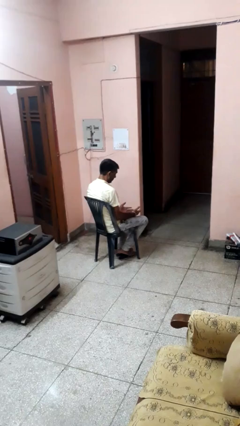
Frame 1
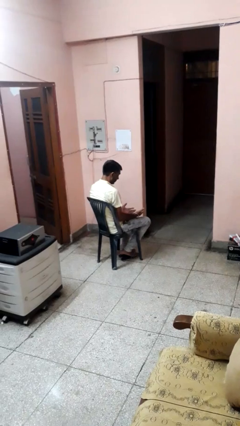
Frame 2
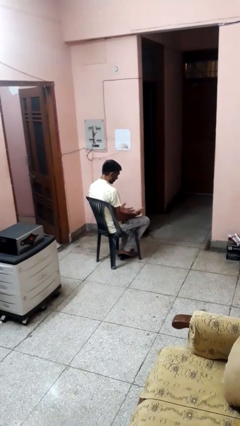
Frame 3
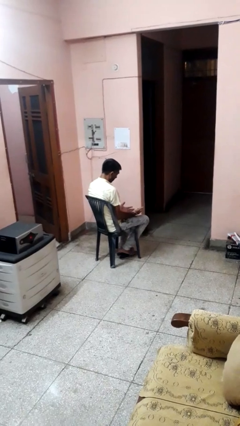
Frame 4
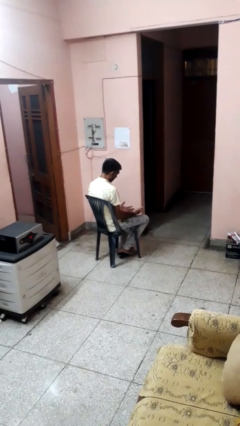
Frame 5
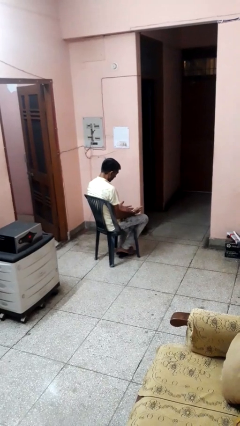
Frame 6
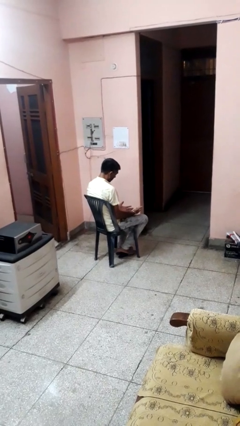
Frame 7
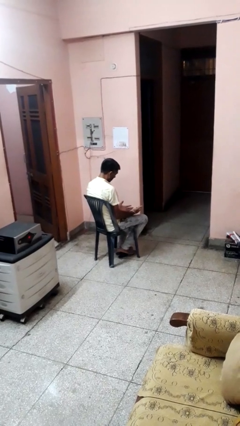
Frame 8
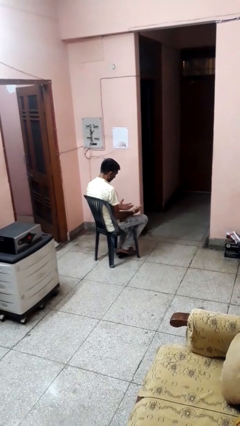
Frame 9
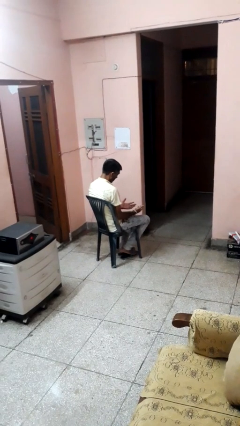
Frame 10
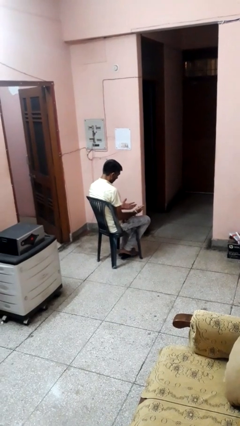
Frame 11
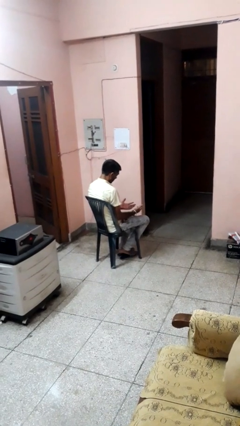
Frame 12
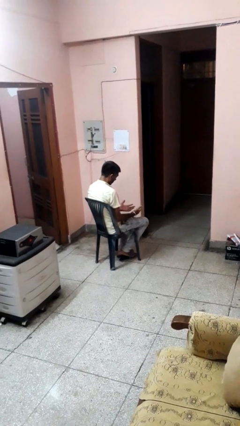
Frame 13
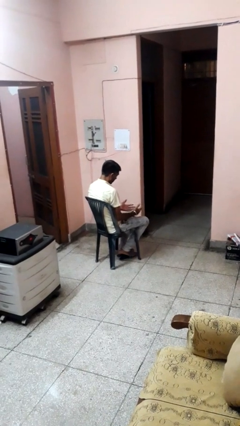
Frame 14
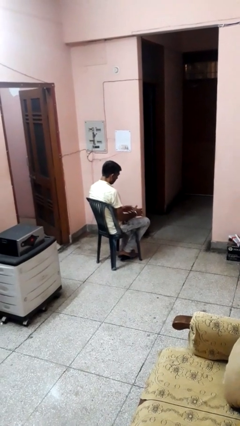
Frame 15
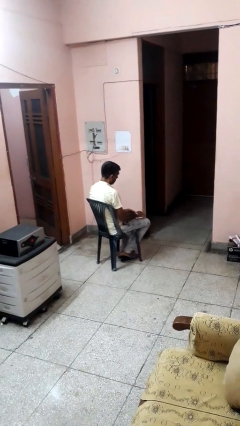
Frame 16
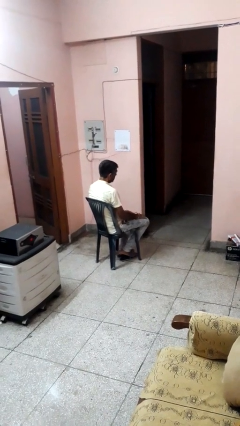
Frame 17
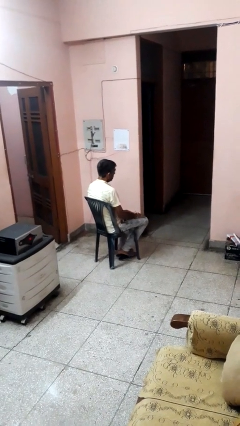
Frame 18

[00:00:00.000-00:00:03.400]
person looks at hands in lap

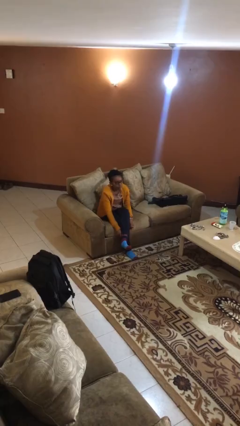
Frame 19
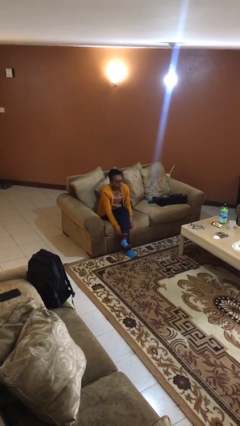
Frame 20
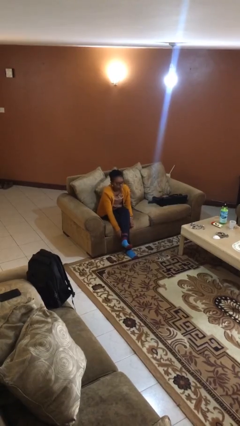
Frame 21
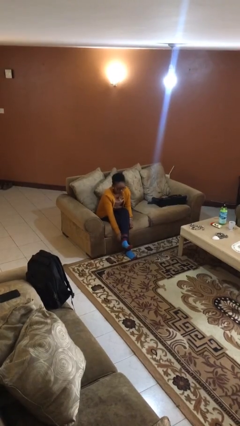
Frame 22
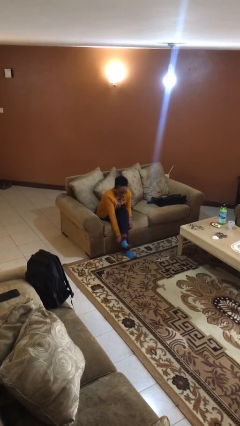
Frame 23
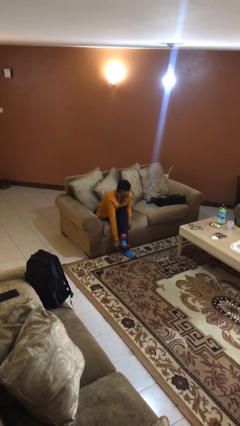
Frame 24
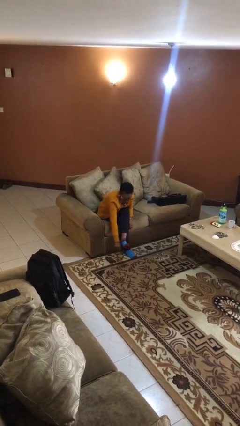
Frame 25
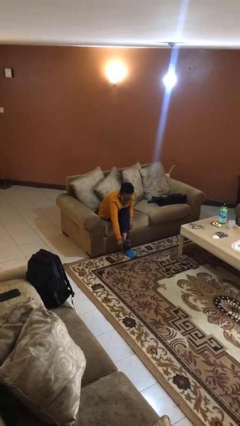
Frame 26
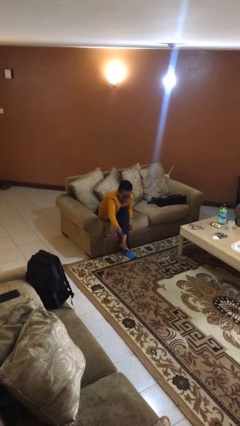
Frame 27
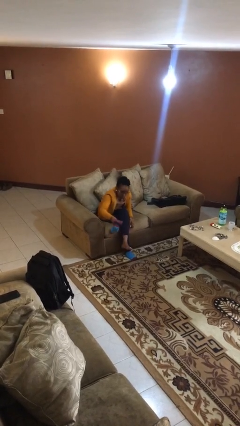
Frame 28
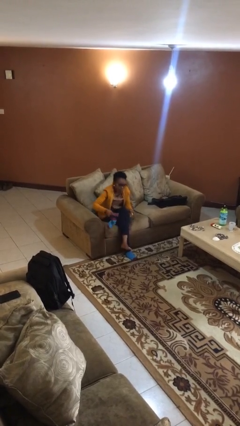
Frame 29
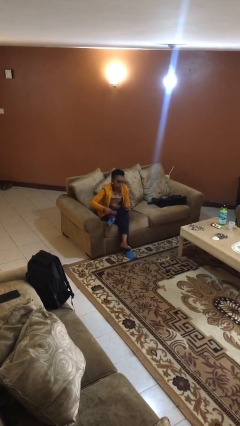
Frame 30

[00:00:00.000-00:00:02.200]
person takes off socks

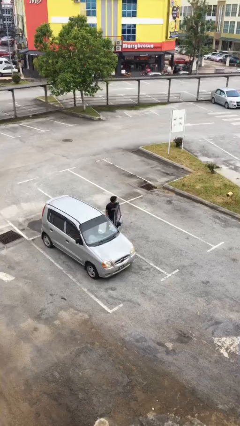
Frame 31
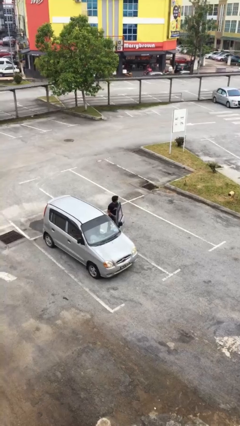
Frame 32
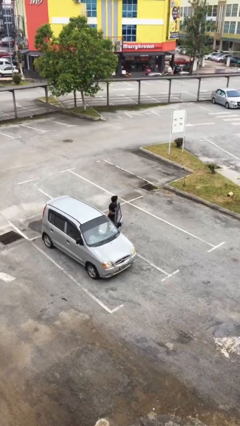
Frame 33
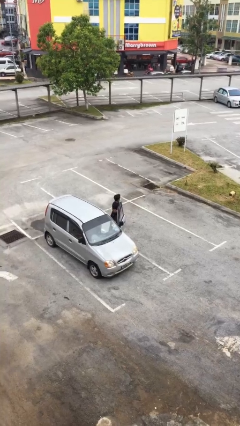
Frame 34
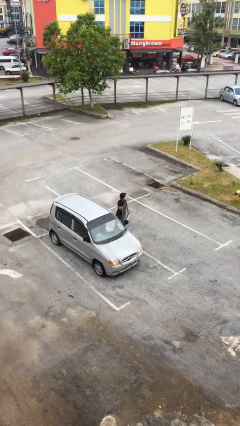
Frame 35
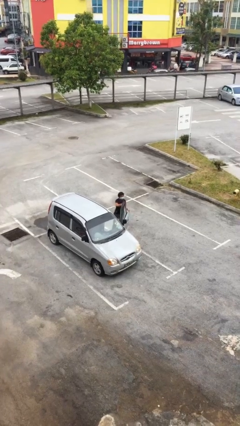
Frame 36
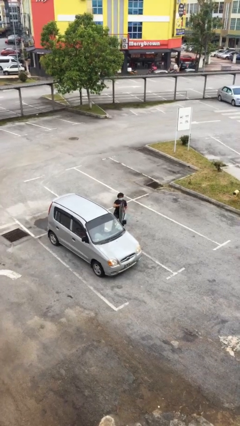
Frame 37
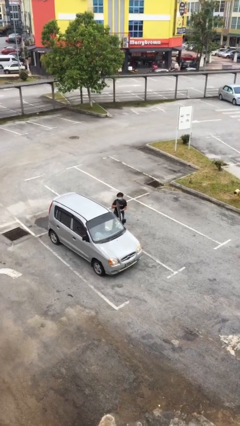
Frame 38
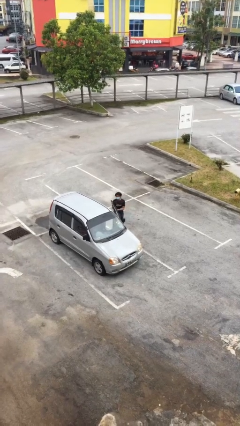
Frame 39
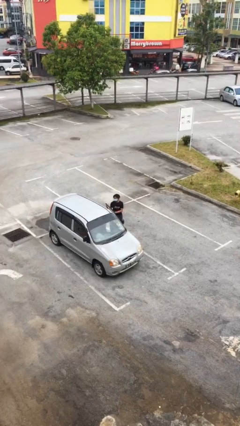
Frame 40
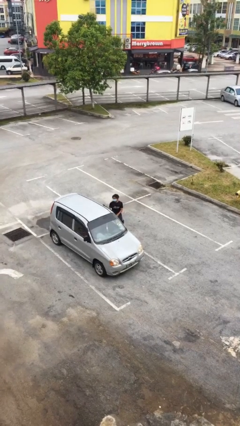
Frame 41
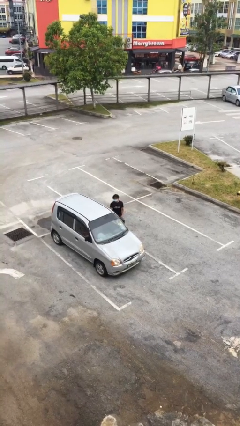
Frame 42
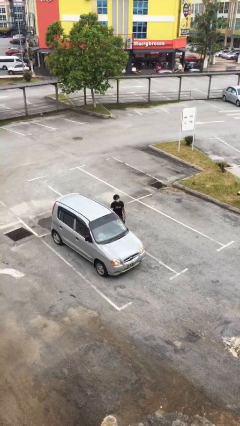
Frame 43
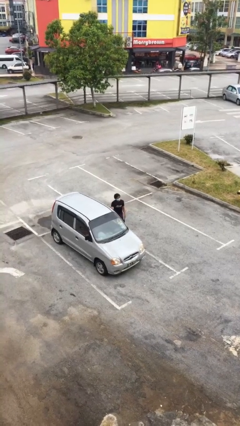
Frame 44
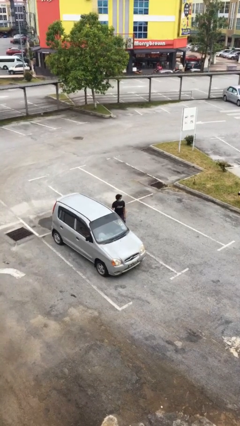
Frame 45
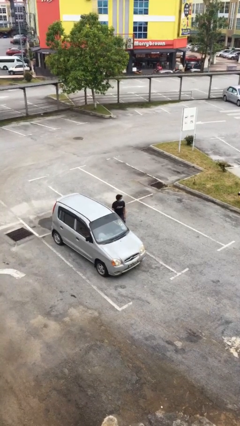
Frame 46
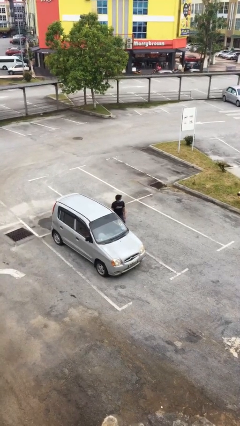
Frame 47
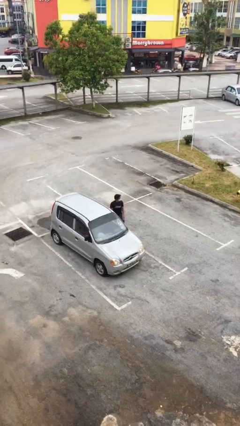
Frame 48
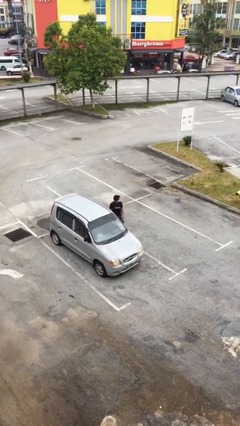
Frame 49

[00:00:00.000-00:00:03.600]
person closes car door

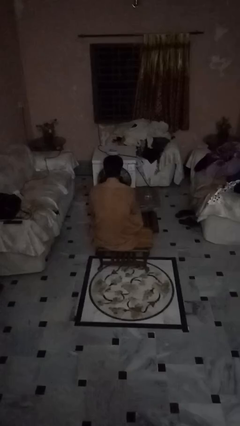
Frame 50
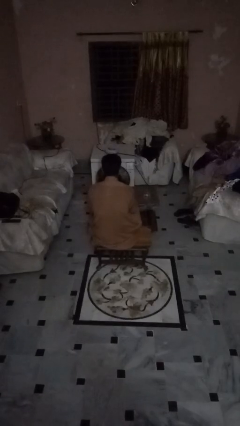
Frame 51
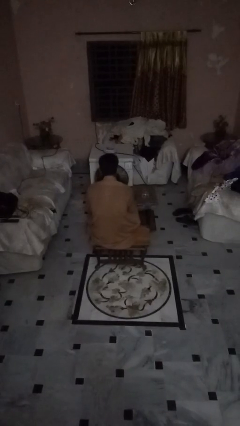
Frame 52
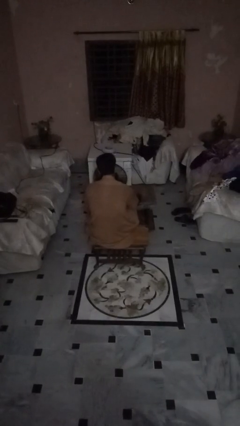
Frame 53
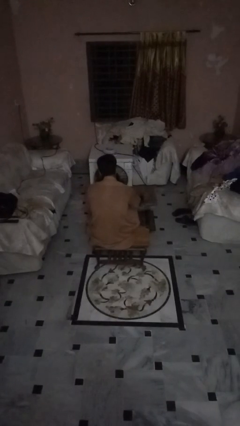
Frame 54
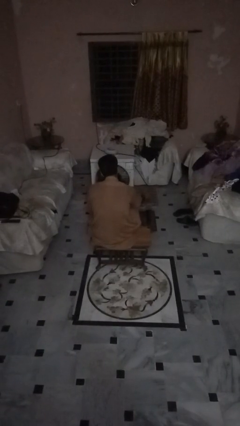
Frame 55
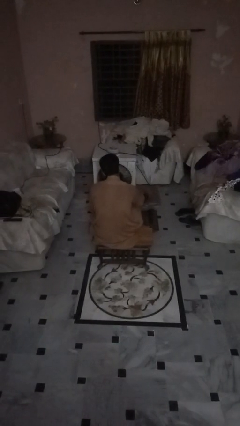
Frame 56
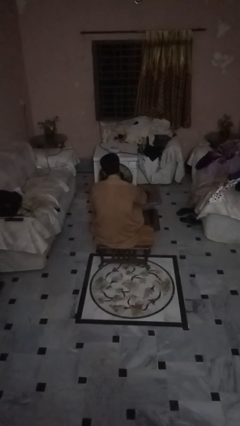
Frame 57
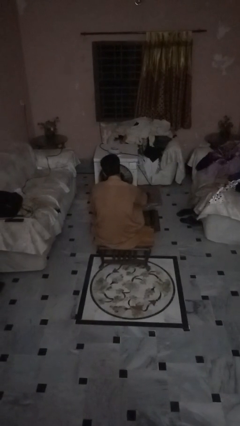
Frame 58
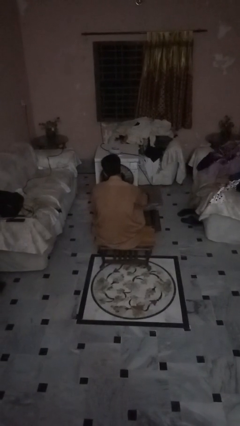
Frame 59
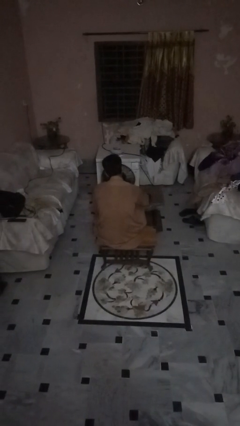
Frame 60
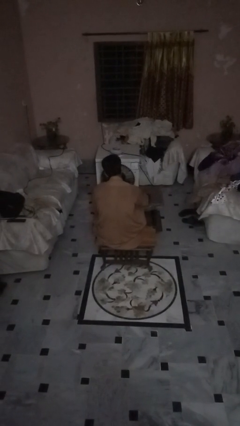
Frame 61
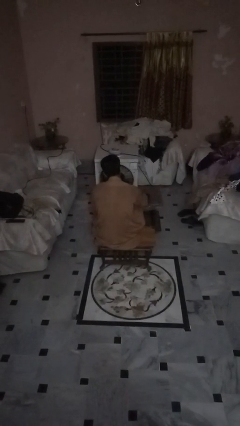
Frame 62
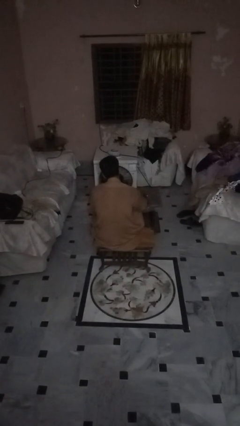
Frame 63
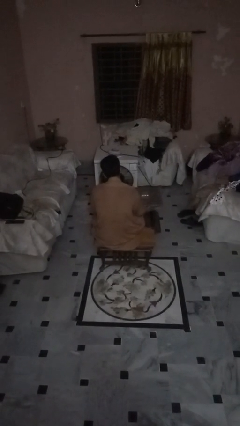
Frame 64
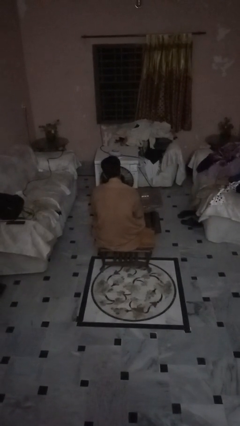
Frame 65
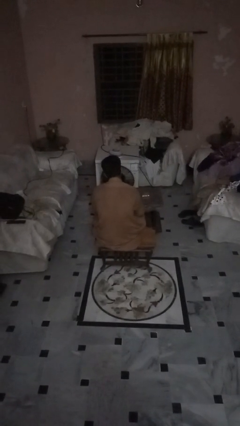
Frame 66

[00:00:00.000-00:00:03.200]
person spills on table

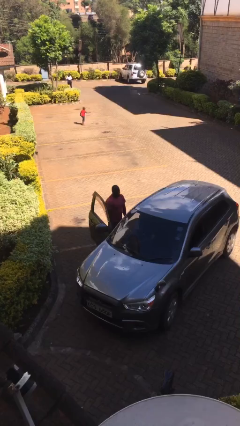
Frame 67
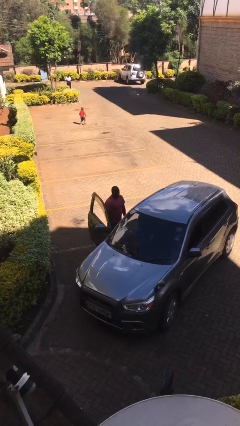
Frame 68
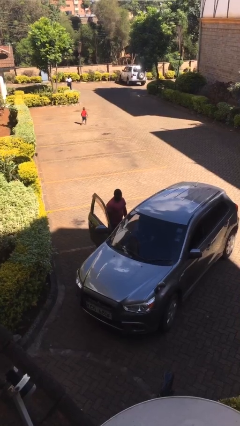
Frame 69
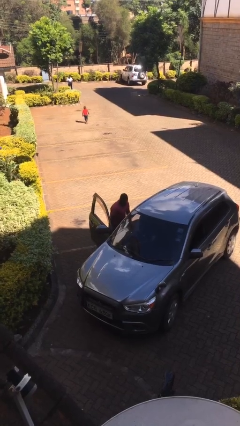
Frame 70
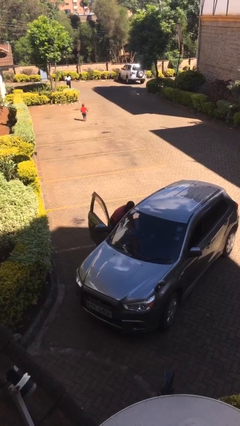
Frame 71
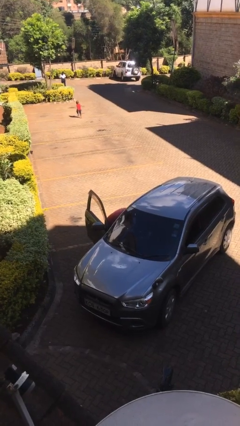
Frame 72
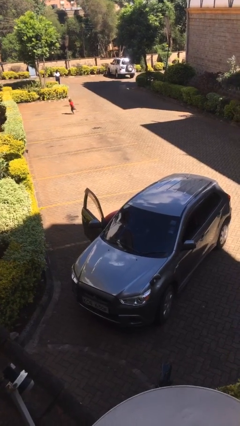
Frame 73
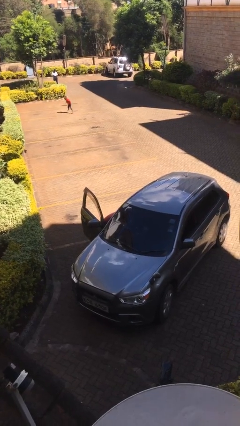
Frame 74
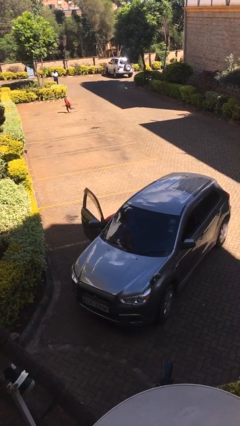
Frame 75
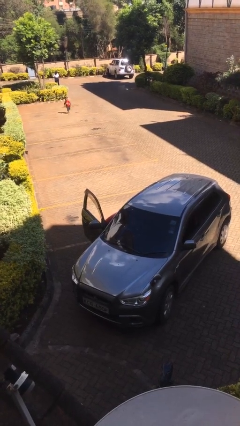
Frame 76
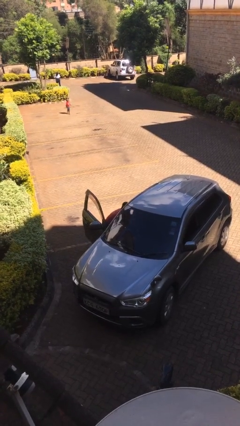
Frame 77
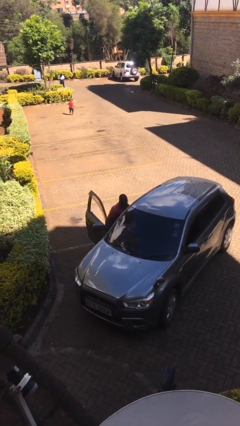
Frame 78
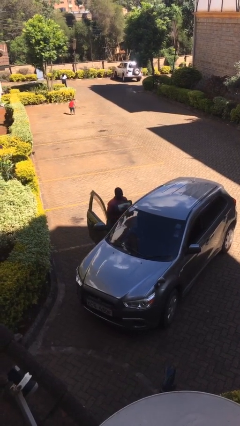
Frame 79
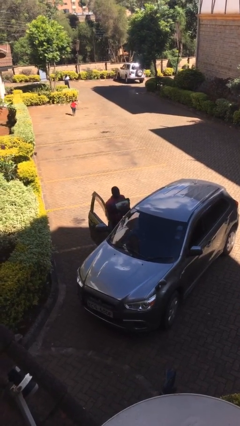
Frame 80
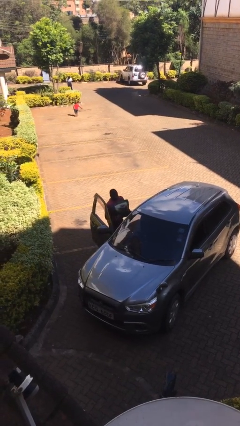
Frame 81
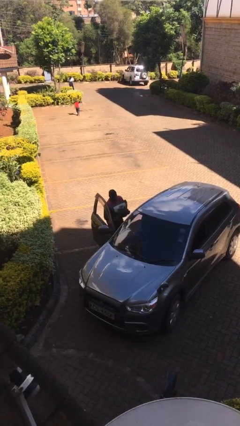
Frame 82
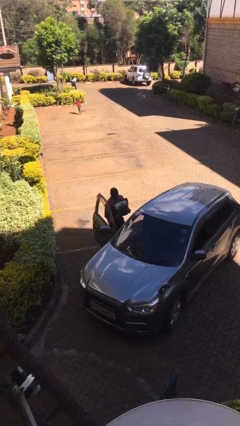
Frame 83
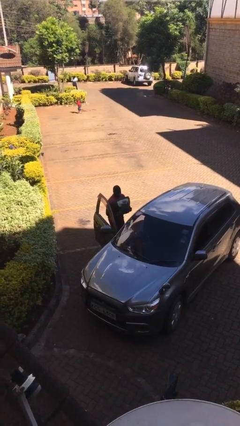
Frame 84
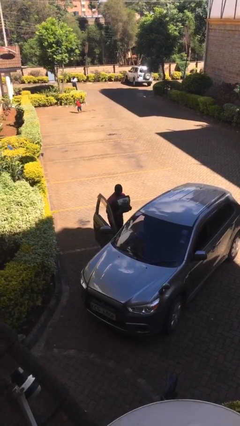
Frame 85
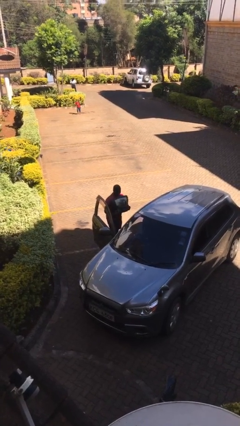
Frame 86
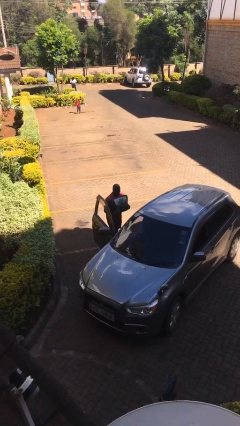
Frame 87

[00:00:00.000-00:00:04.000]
person unloads car

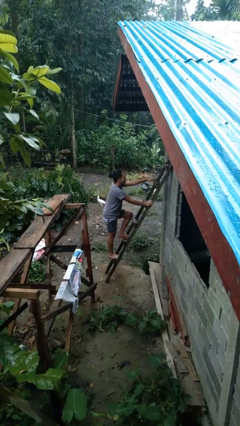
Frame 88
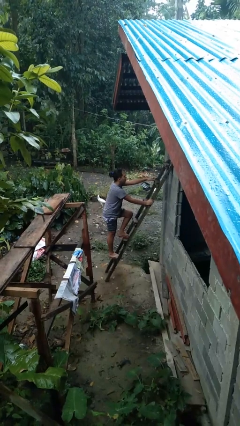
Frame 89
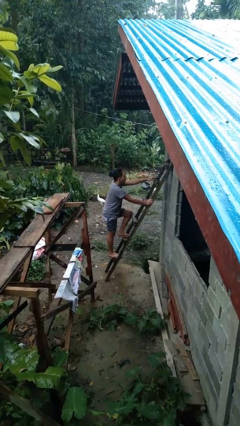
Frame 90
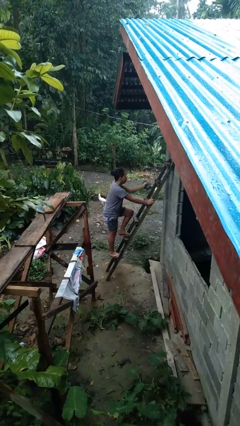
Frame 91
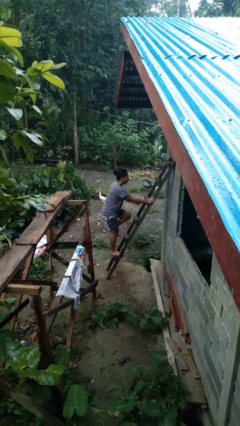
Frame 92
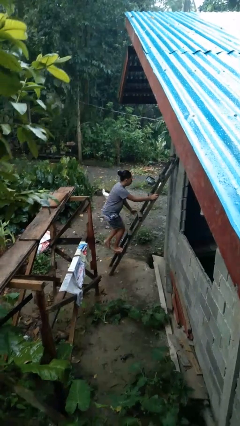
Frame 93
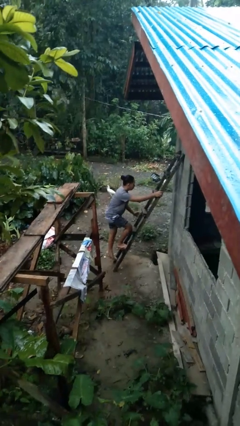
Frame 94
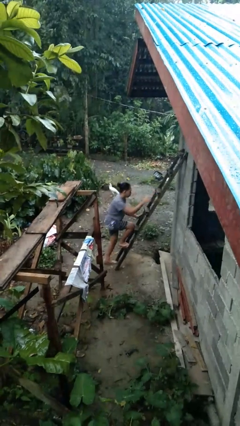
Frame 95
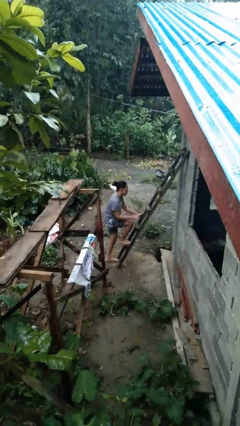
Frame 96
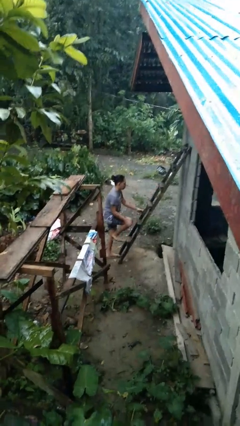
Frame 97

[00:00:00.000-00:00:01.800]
person climbs down ladder
